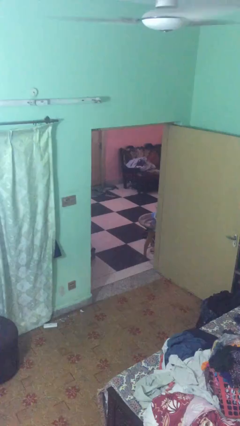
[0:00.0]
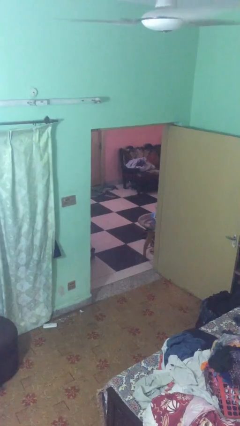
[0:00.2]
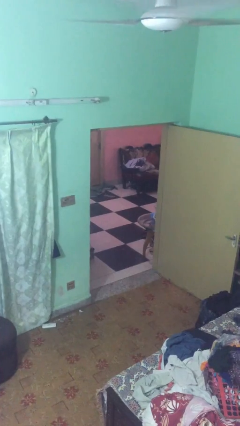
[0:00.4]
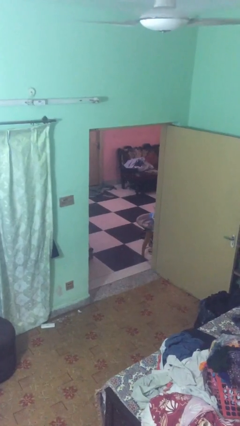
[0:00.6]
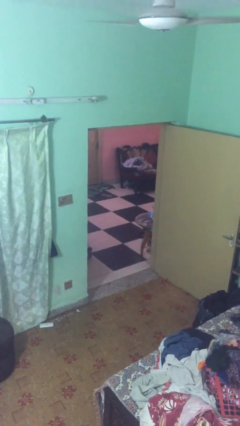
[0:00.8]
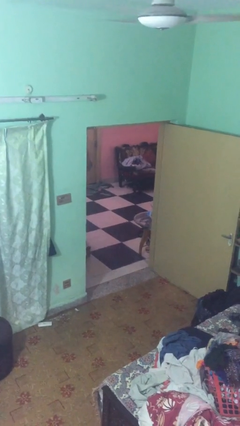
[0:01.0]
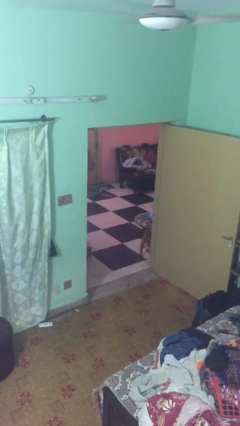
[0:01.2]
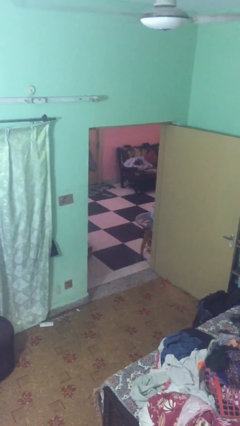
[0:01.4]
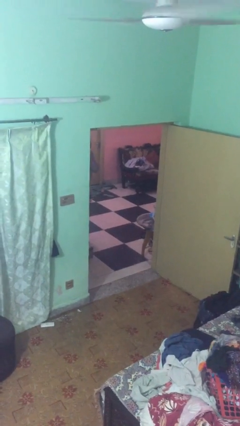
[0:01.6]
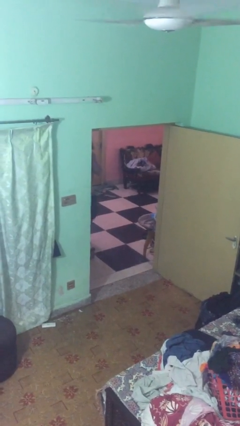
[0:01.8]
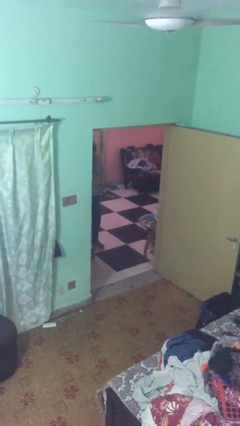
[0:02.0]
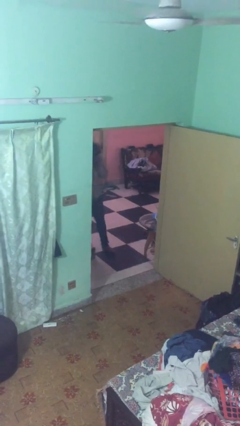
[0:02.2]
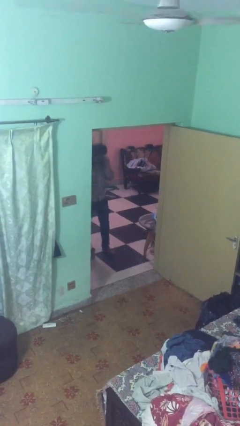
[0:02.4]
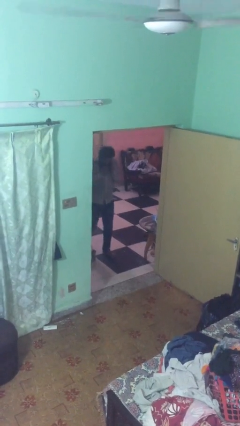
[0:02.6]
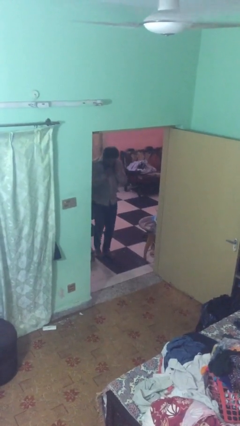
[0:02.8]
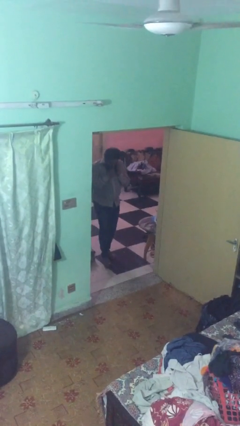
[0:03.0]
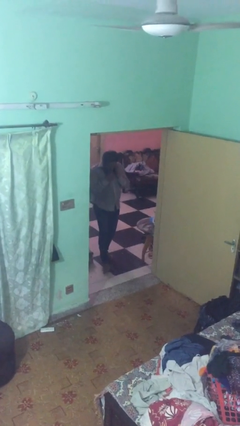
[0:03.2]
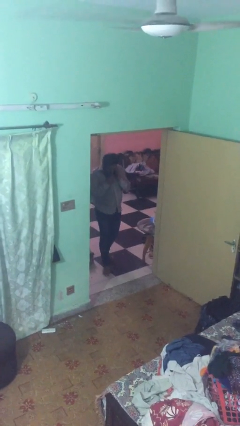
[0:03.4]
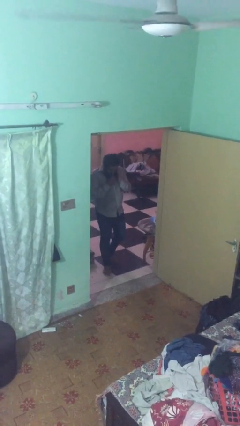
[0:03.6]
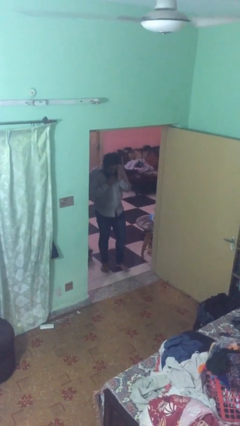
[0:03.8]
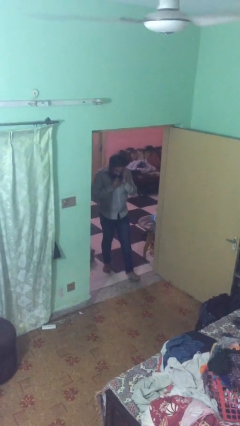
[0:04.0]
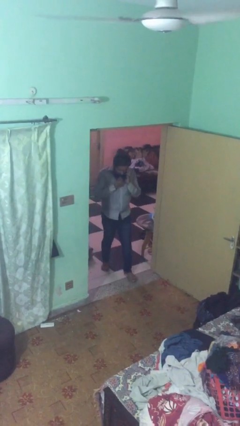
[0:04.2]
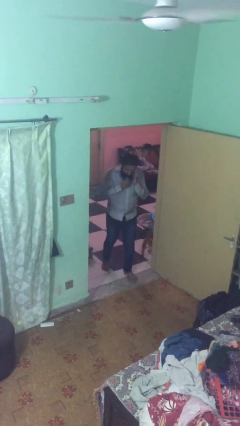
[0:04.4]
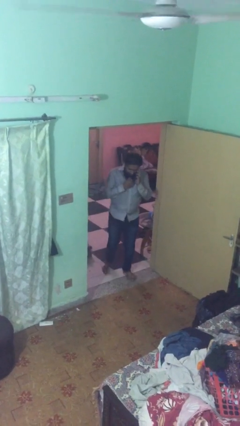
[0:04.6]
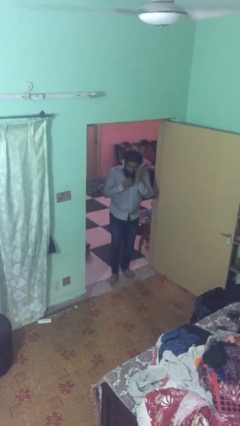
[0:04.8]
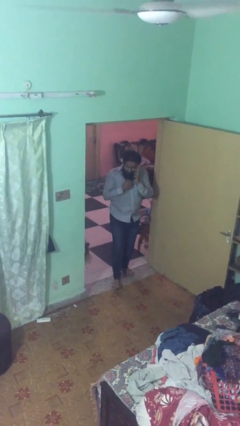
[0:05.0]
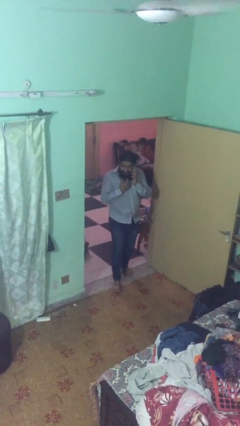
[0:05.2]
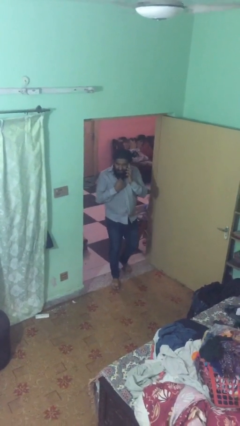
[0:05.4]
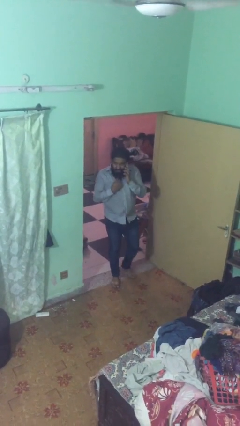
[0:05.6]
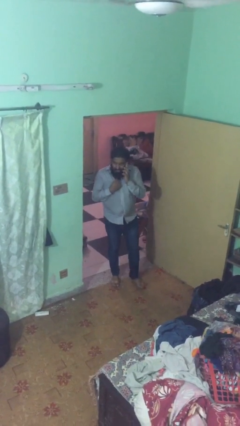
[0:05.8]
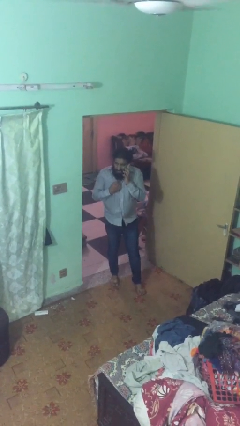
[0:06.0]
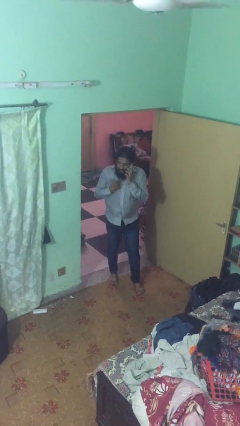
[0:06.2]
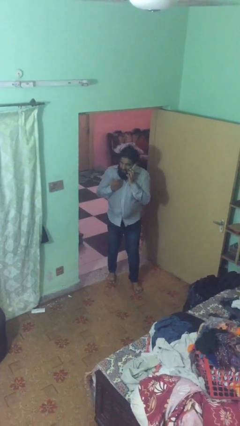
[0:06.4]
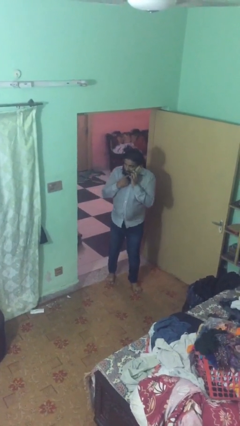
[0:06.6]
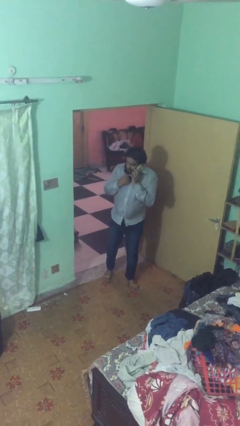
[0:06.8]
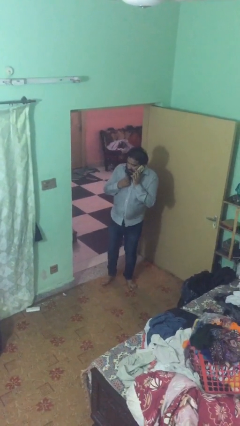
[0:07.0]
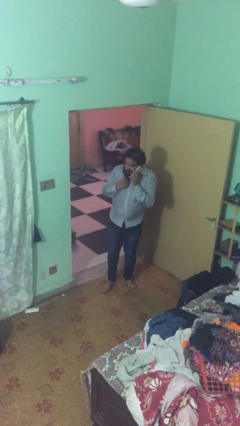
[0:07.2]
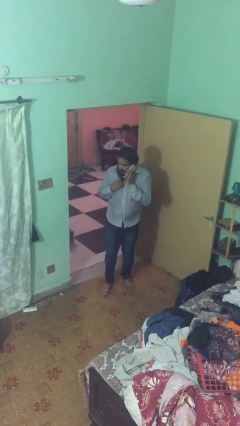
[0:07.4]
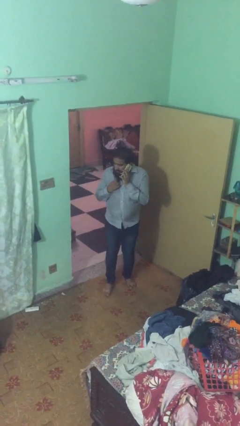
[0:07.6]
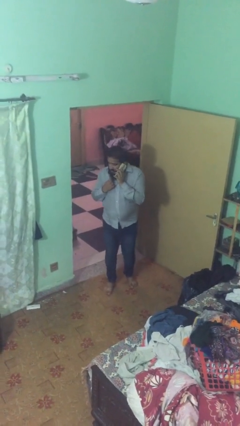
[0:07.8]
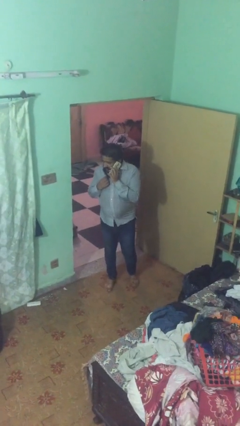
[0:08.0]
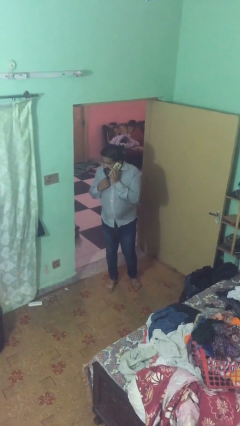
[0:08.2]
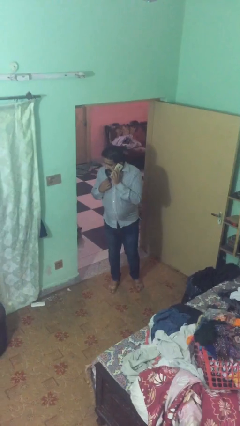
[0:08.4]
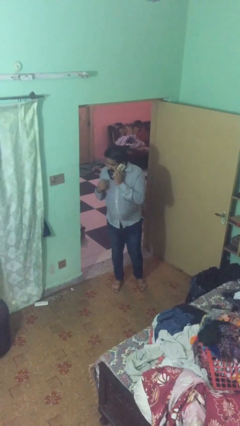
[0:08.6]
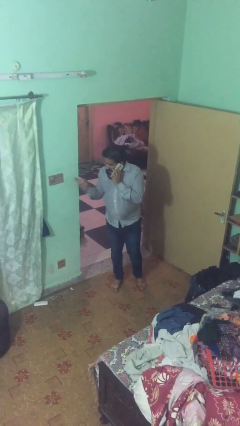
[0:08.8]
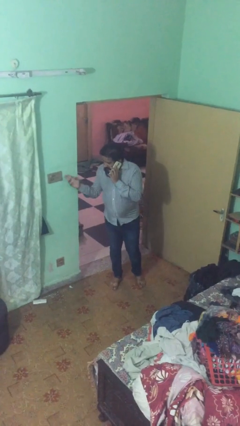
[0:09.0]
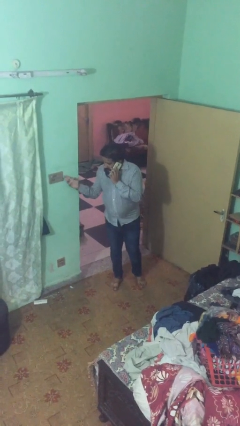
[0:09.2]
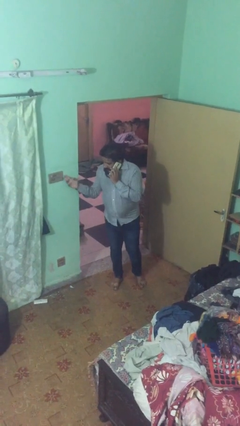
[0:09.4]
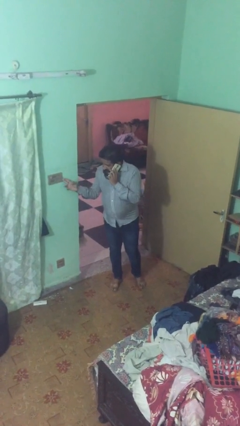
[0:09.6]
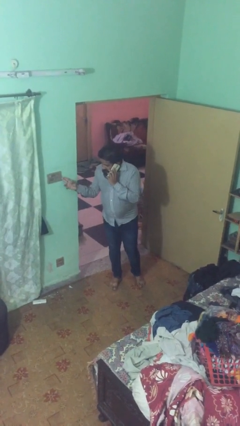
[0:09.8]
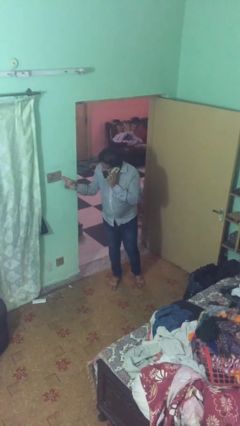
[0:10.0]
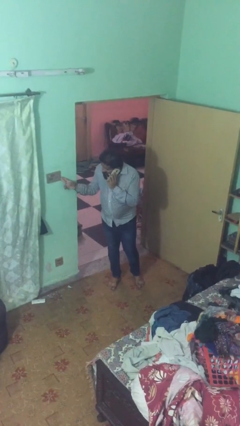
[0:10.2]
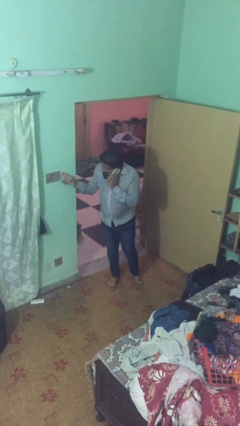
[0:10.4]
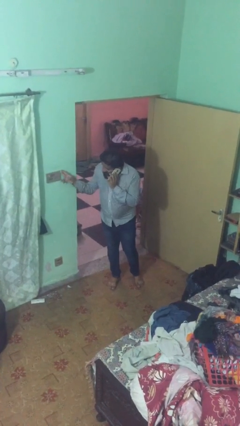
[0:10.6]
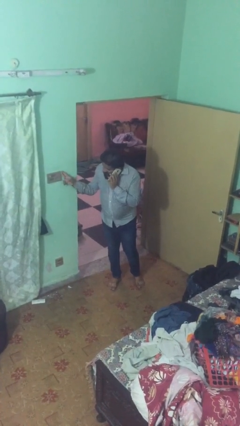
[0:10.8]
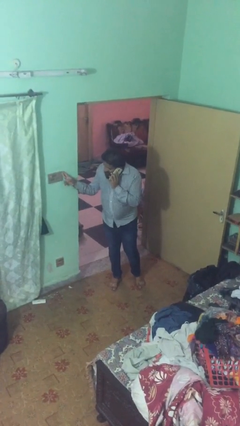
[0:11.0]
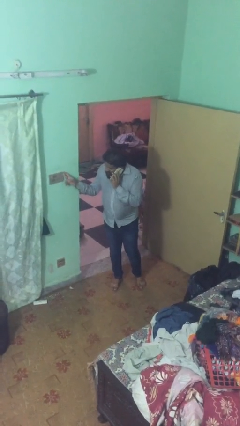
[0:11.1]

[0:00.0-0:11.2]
person enters scene through structure

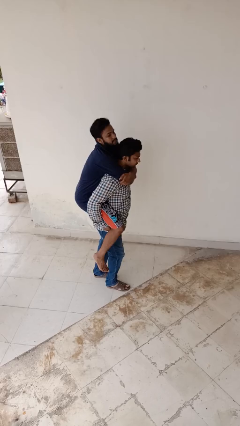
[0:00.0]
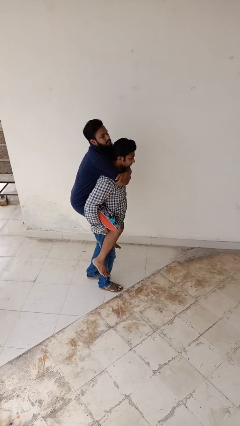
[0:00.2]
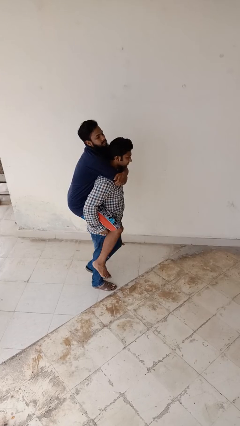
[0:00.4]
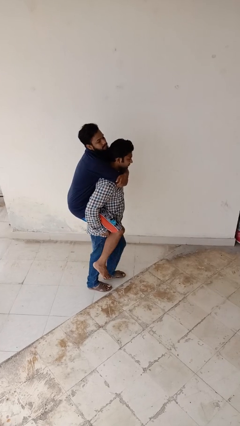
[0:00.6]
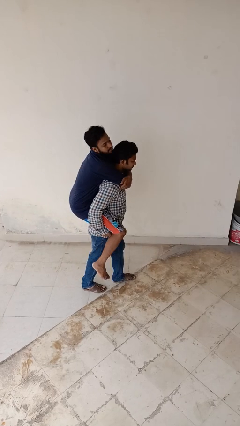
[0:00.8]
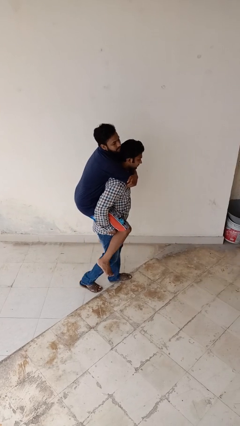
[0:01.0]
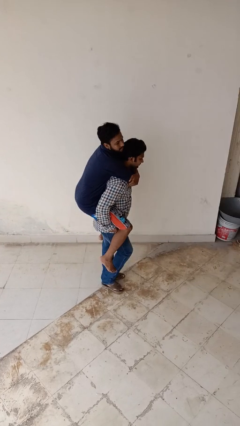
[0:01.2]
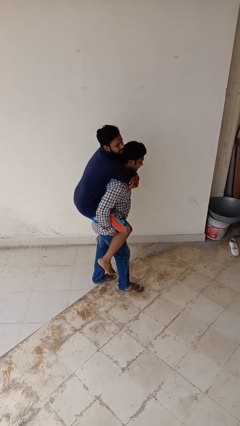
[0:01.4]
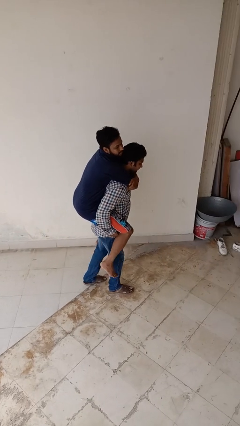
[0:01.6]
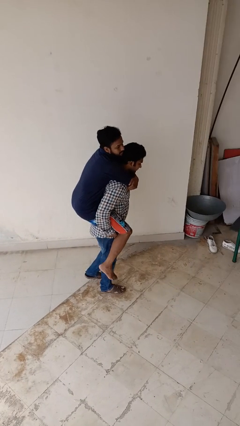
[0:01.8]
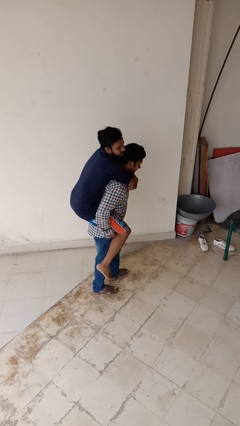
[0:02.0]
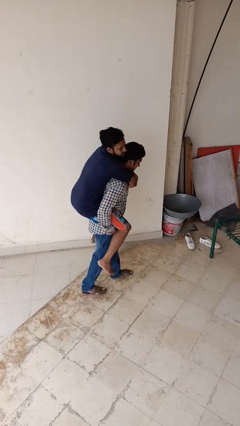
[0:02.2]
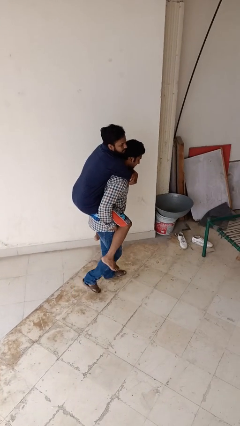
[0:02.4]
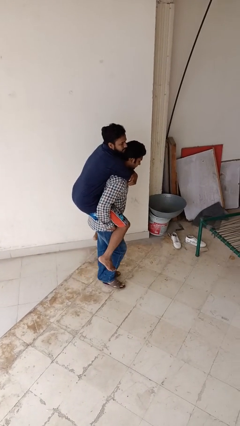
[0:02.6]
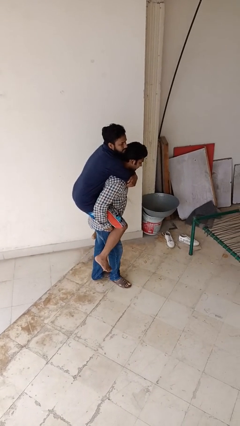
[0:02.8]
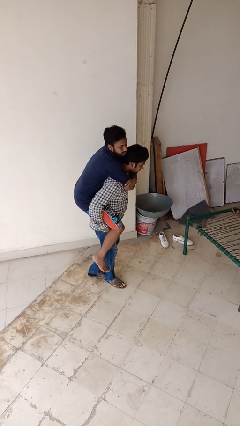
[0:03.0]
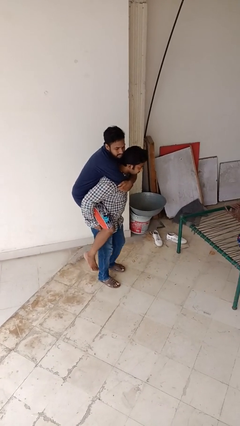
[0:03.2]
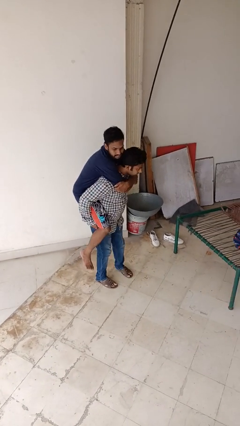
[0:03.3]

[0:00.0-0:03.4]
person carries person on back

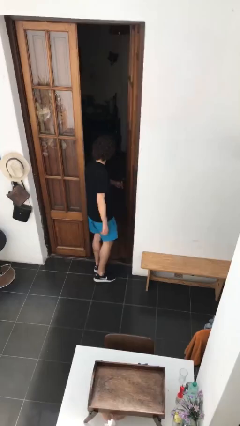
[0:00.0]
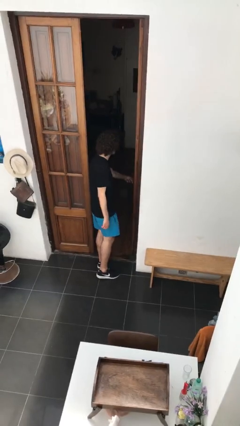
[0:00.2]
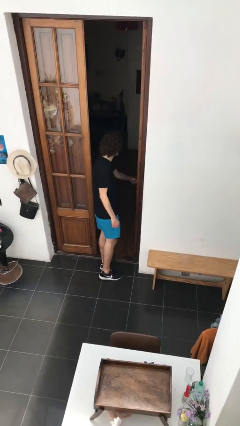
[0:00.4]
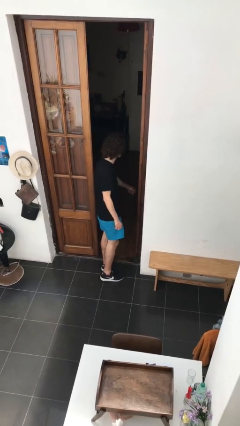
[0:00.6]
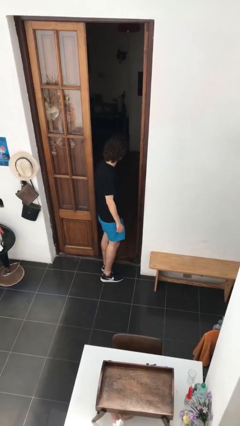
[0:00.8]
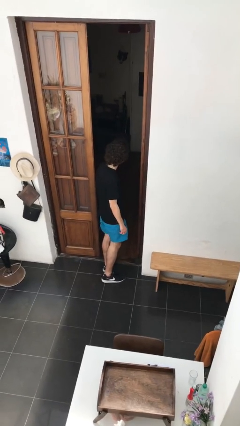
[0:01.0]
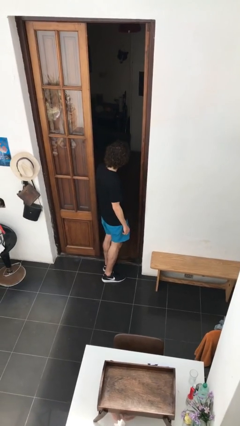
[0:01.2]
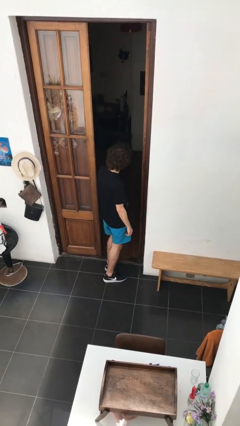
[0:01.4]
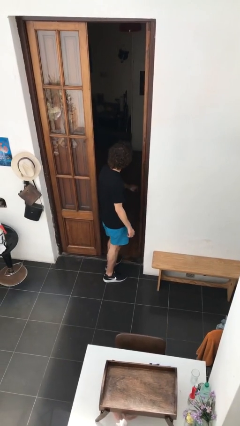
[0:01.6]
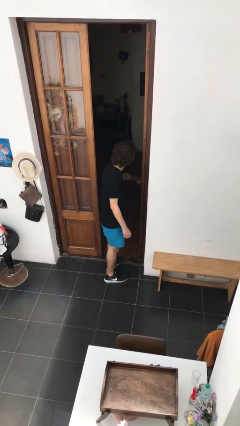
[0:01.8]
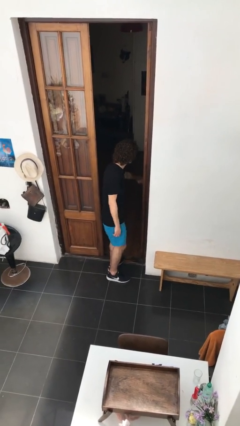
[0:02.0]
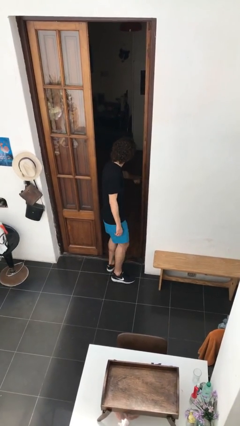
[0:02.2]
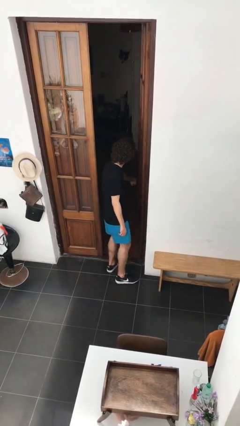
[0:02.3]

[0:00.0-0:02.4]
person opens facility door

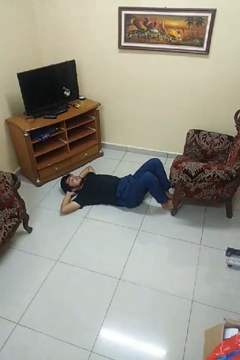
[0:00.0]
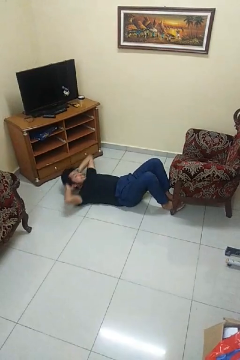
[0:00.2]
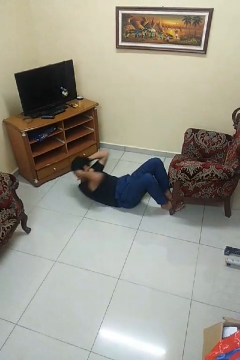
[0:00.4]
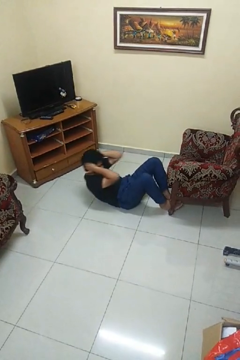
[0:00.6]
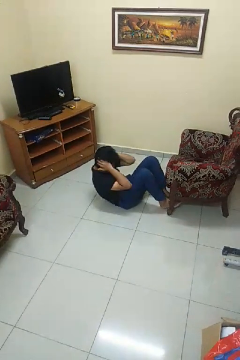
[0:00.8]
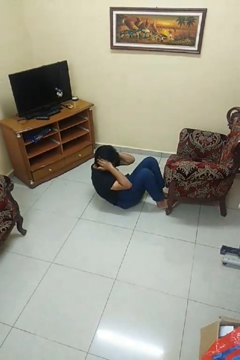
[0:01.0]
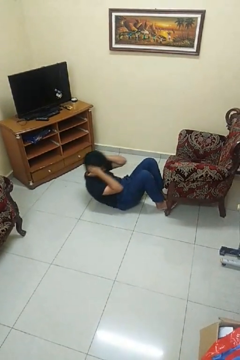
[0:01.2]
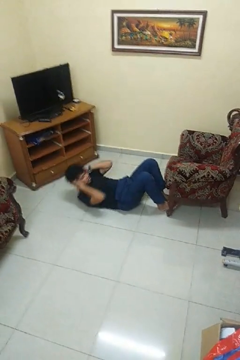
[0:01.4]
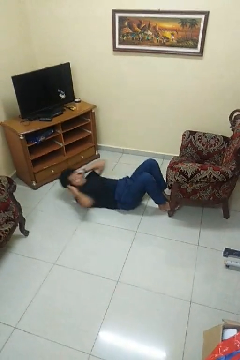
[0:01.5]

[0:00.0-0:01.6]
person exercises with situp
